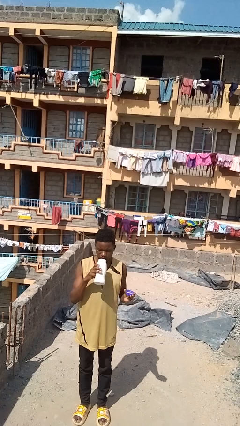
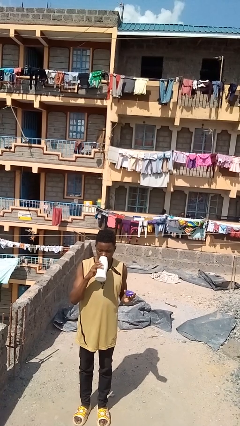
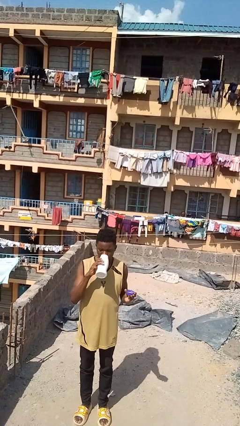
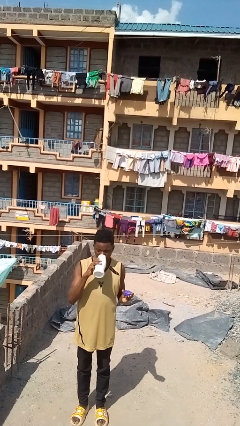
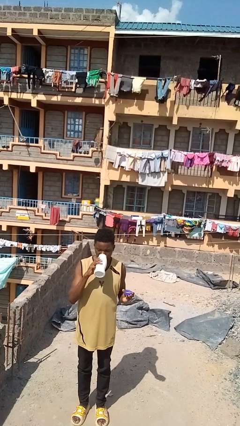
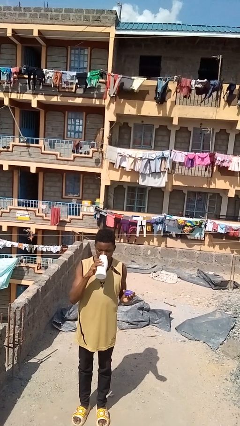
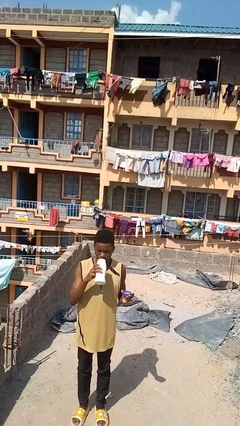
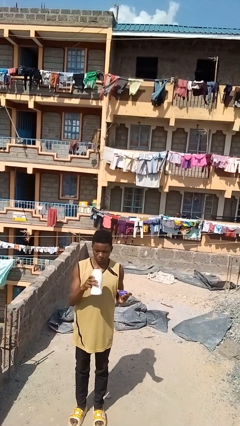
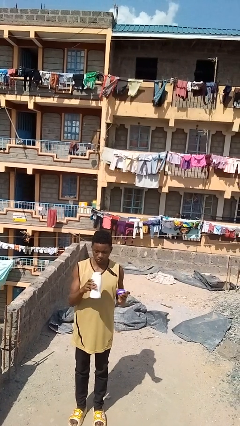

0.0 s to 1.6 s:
person drinks from beverage can

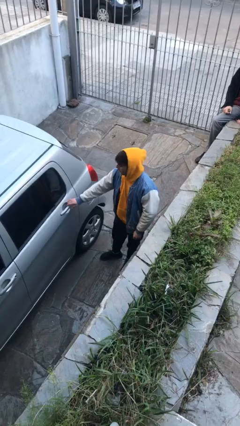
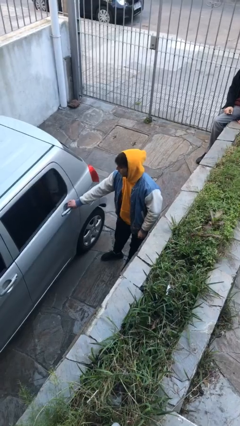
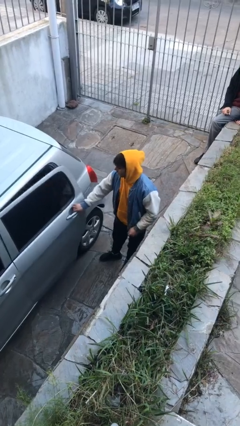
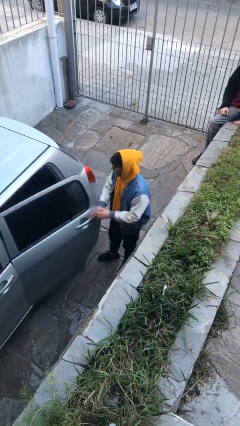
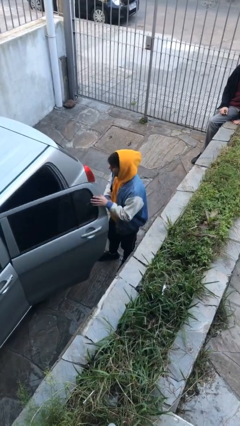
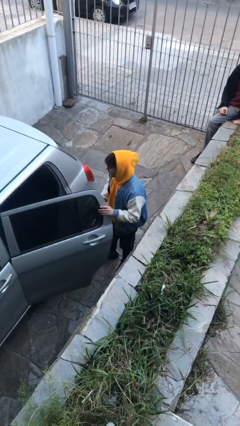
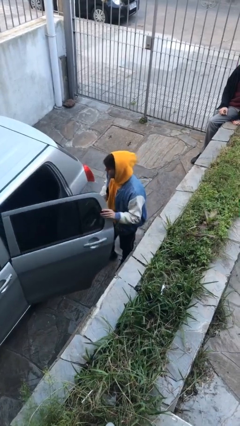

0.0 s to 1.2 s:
person opens car door

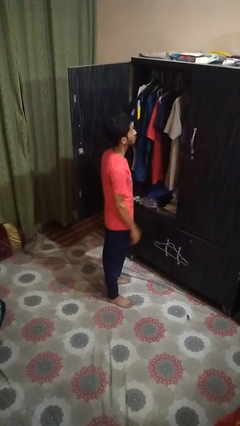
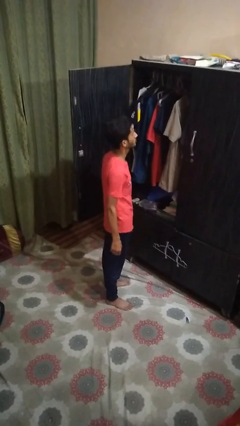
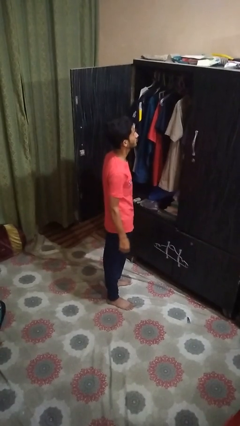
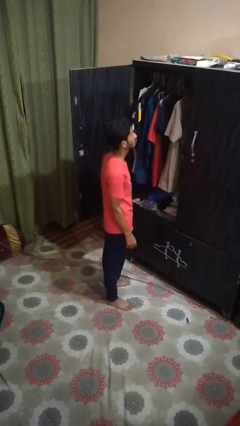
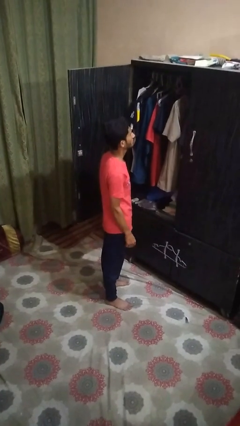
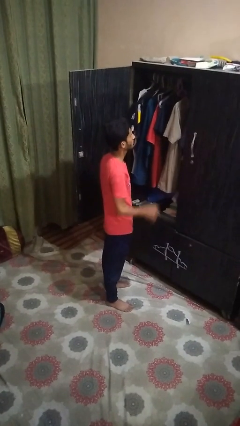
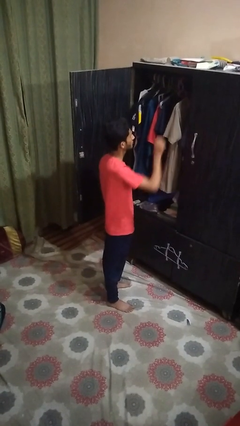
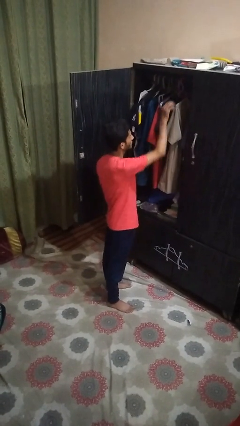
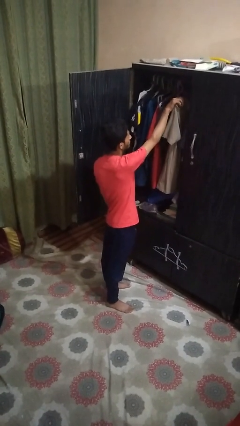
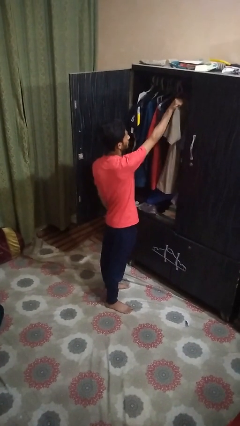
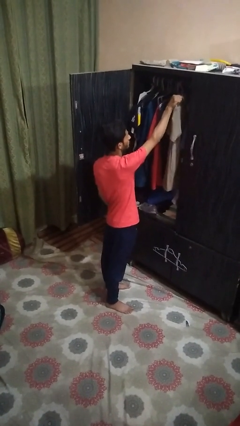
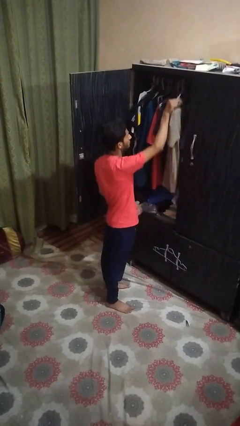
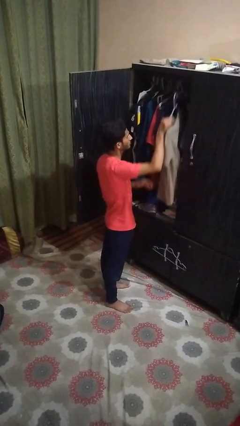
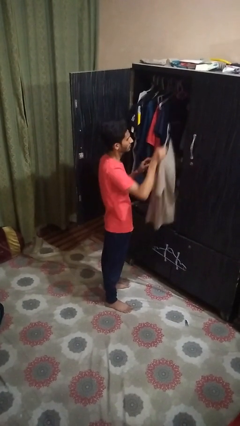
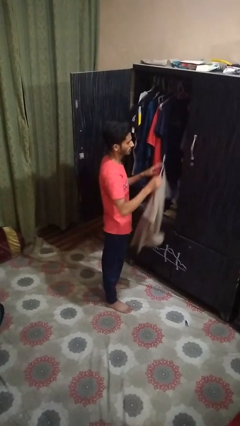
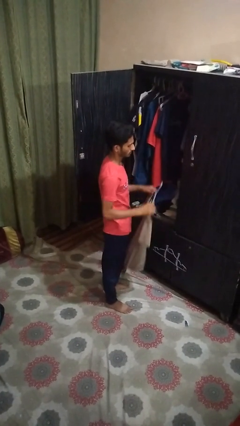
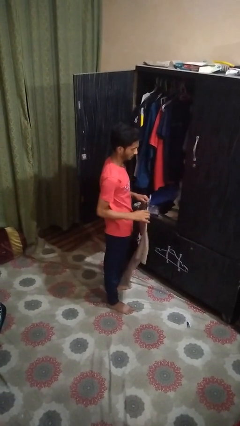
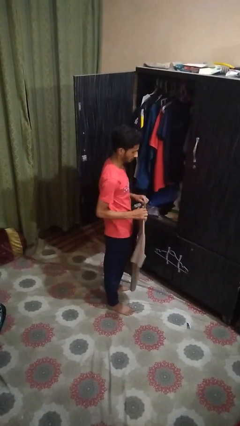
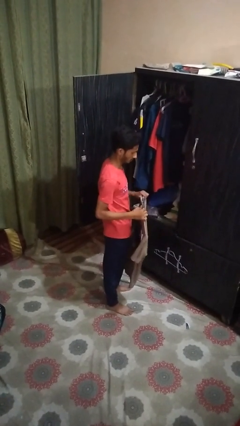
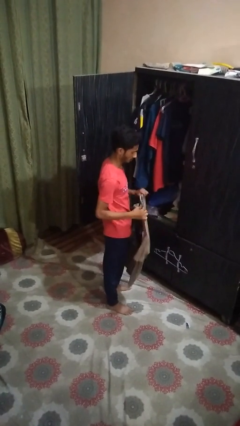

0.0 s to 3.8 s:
person takes clothes from closet

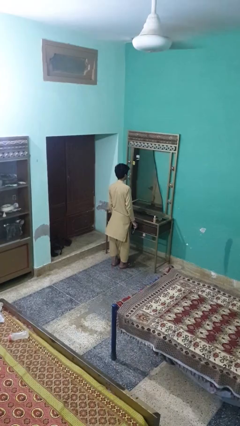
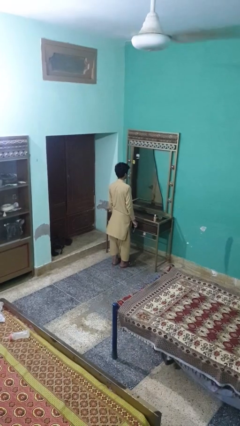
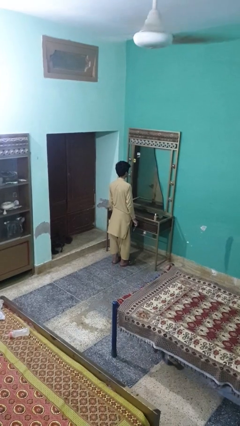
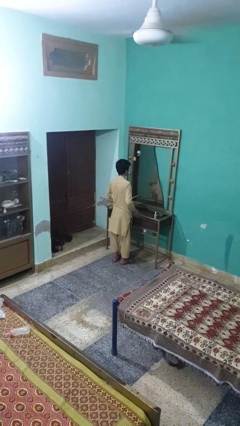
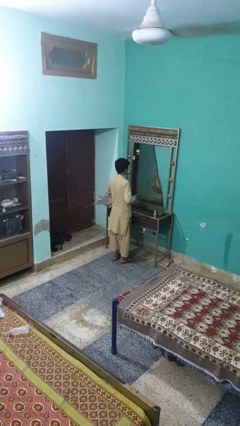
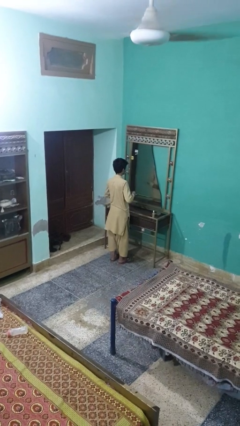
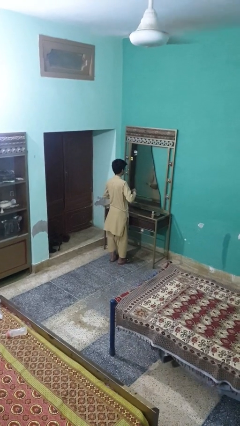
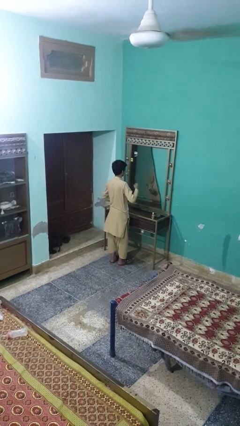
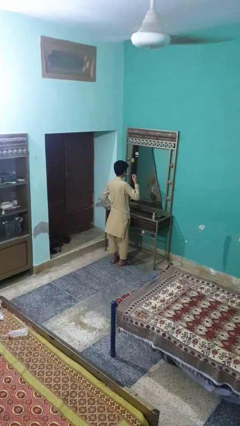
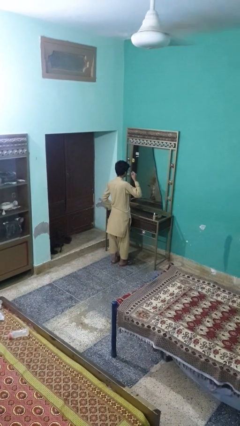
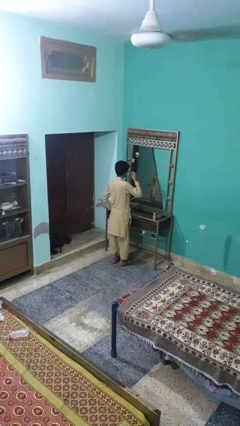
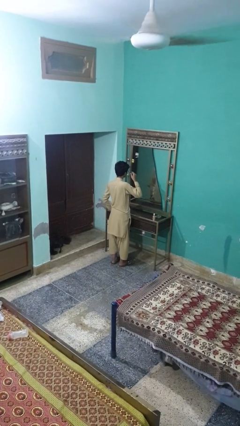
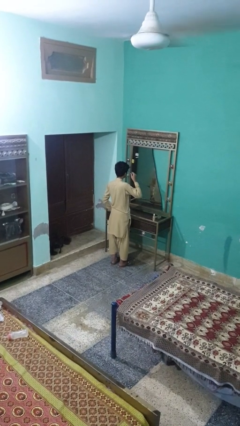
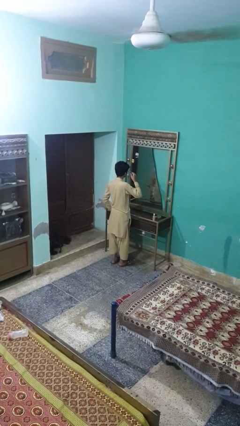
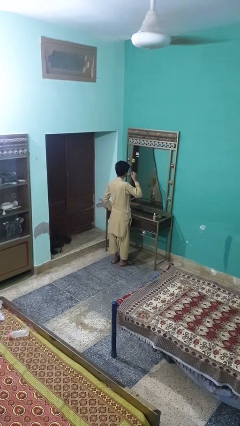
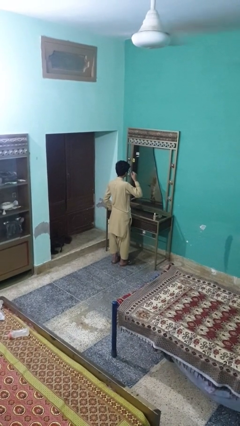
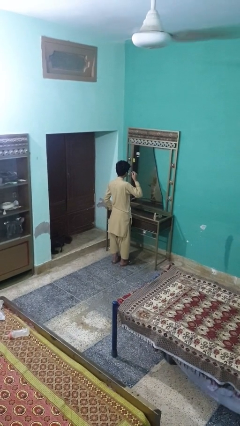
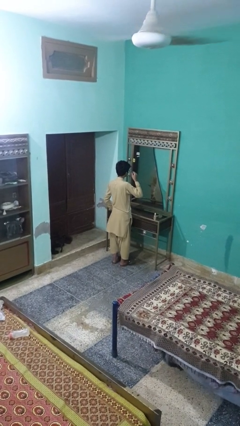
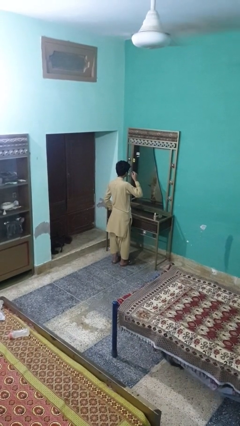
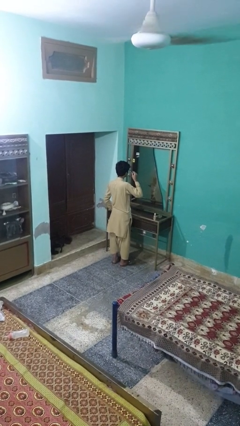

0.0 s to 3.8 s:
person applies eye makeup

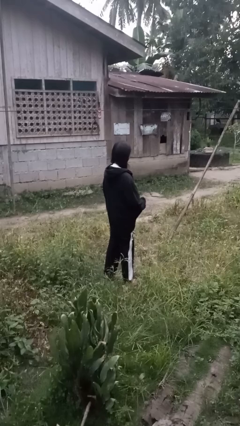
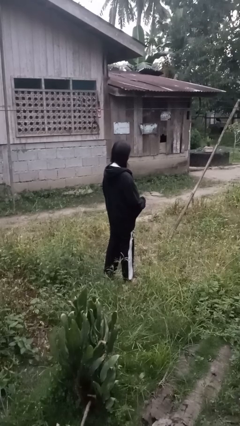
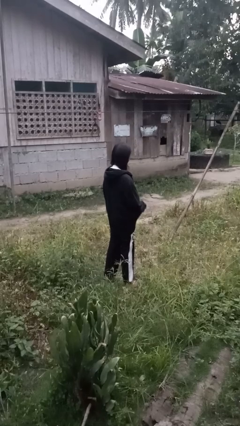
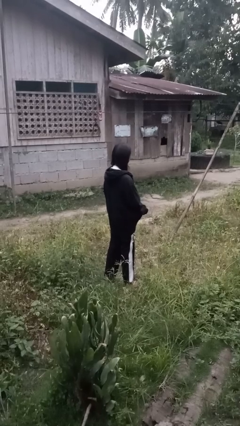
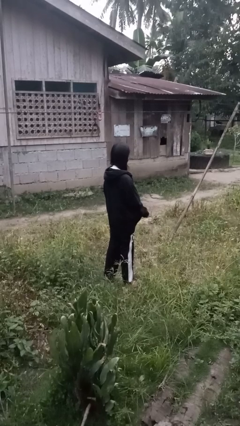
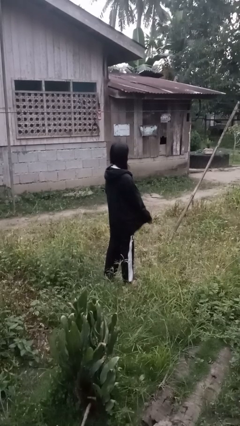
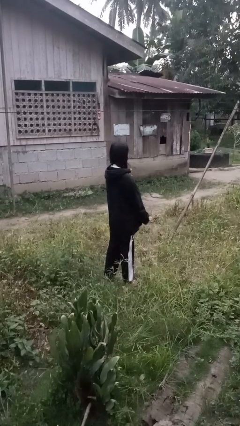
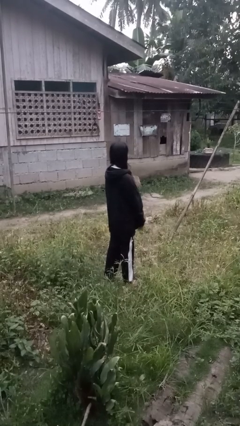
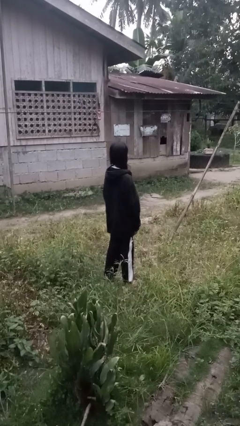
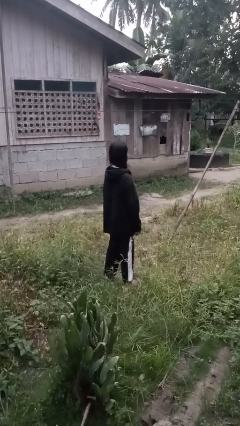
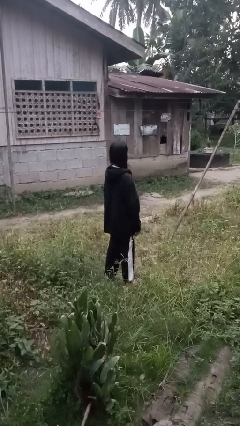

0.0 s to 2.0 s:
person zips up jacket

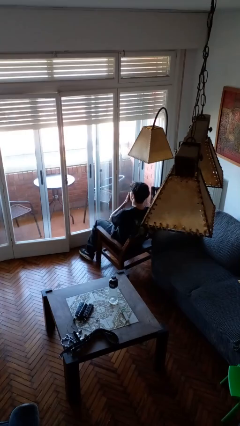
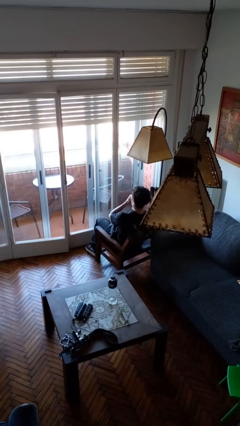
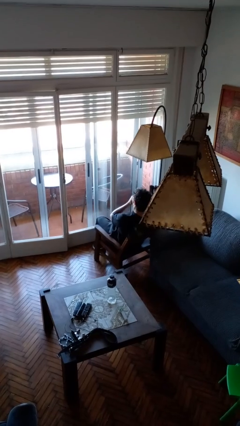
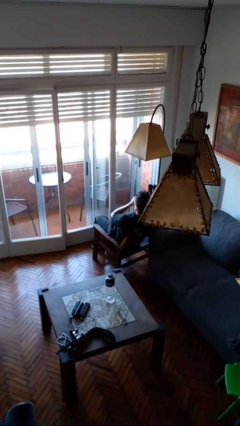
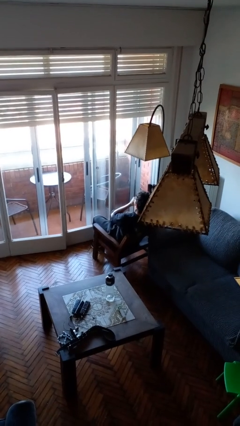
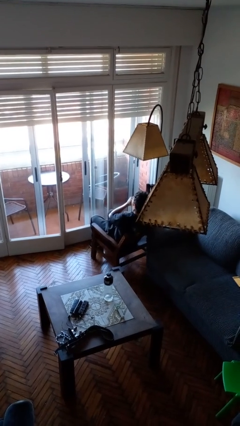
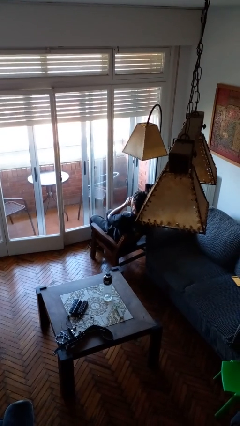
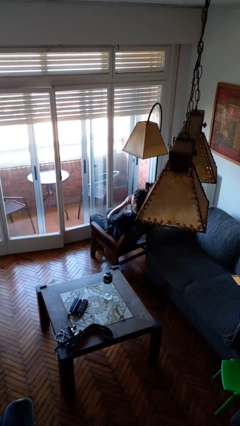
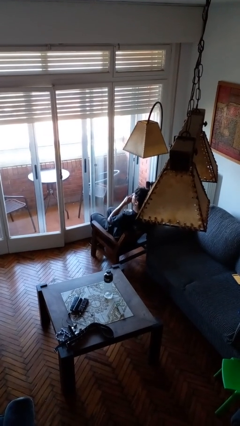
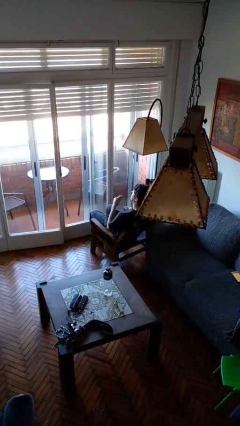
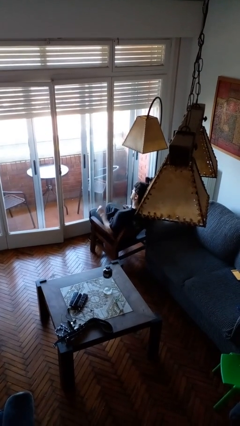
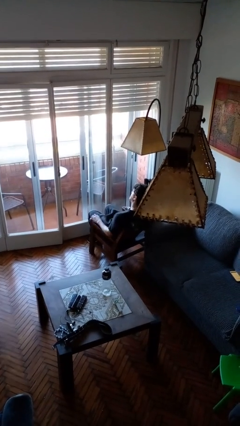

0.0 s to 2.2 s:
person yawns

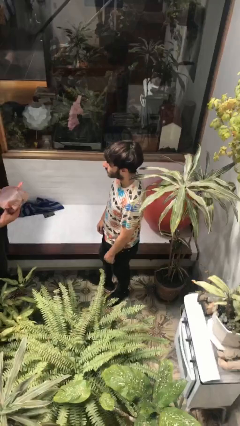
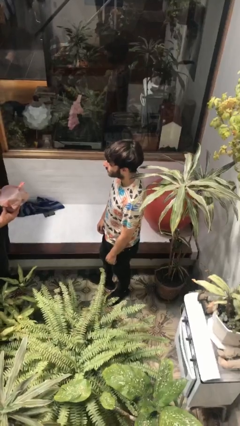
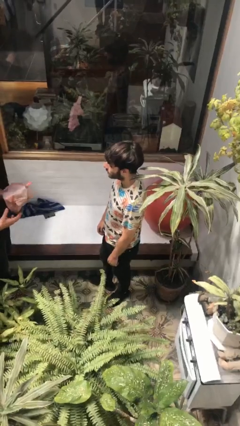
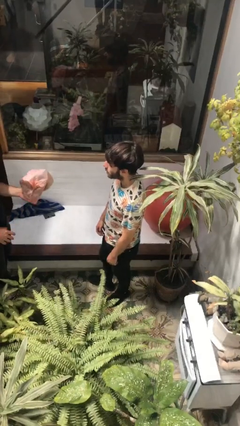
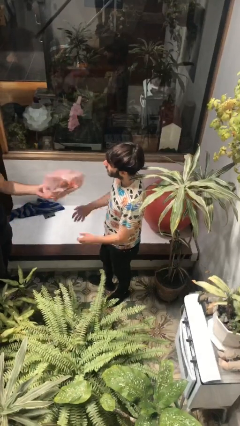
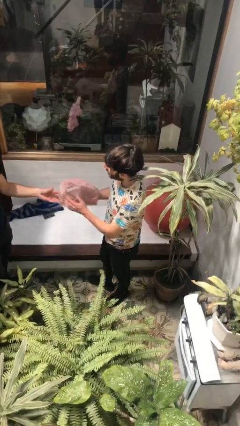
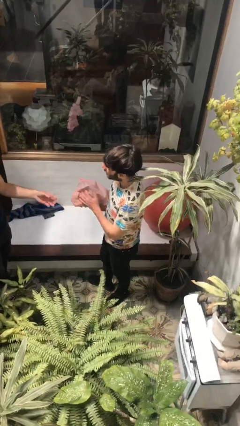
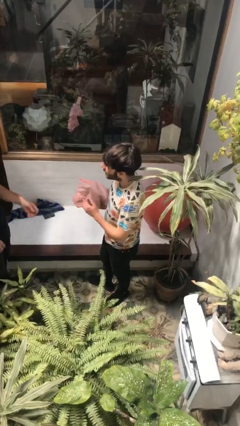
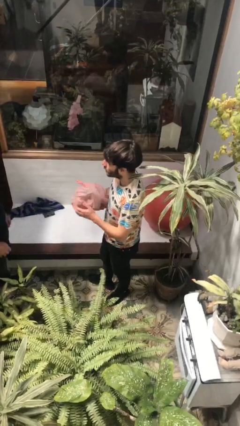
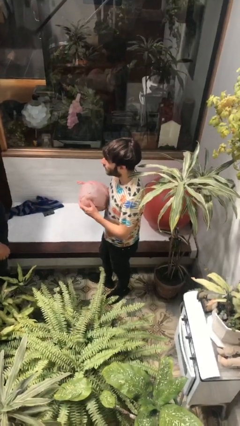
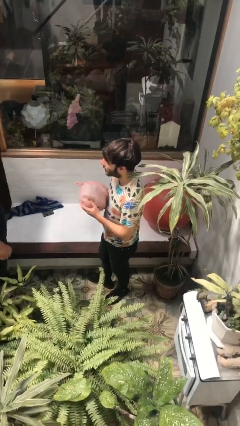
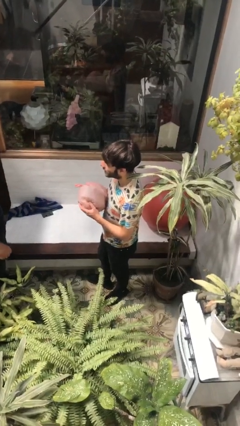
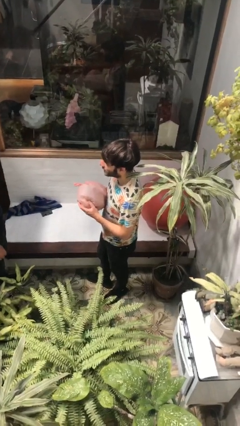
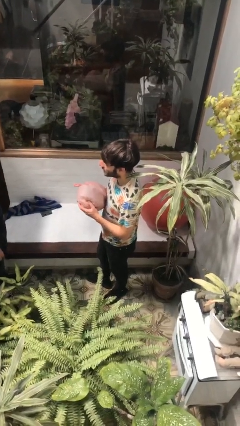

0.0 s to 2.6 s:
person transfers object to person

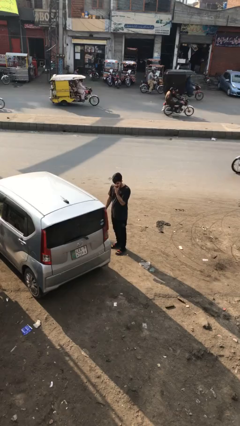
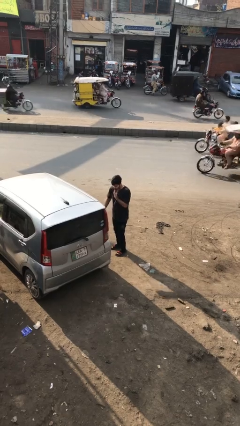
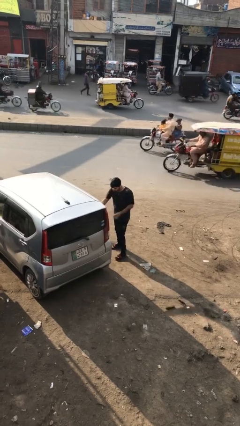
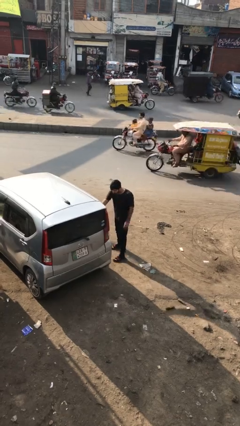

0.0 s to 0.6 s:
car drops off person
